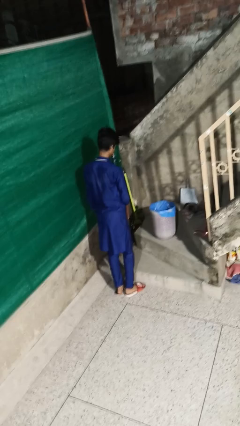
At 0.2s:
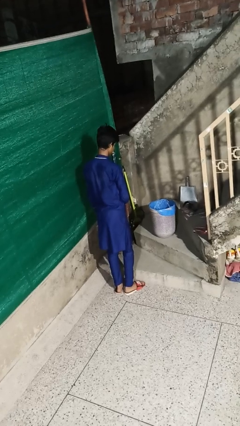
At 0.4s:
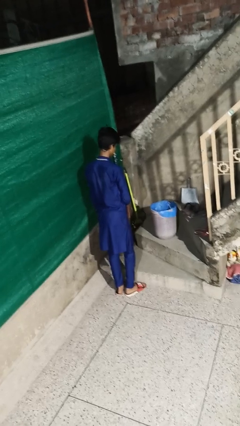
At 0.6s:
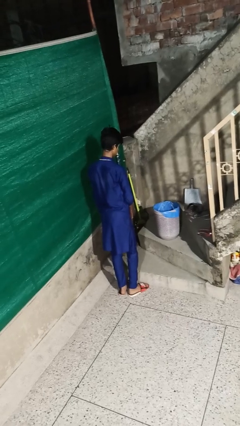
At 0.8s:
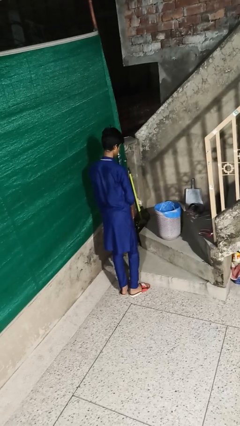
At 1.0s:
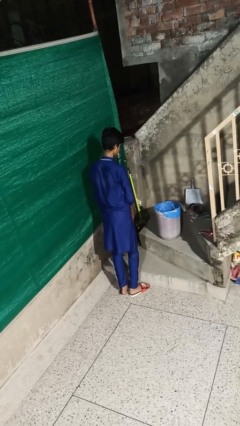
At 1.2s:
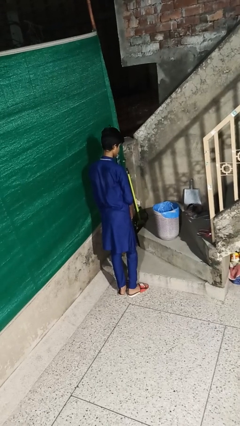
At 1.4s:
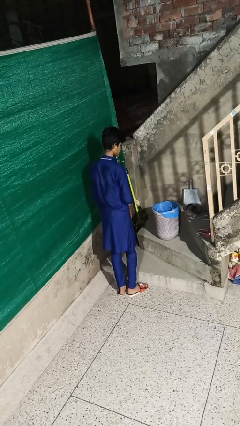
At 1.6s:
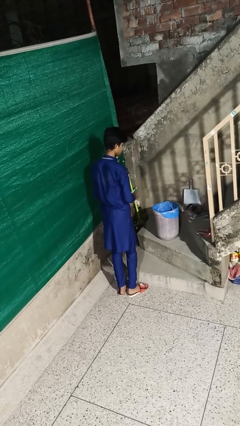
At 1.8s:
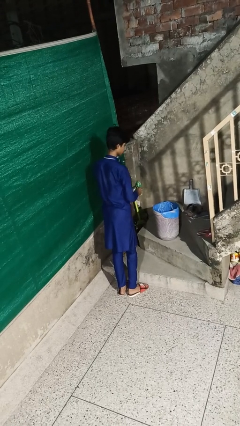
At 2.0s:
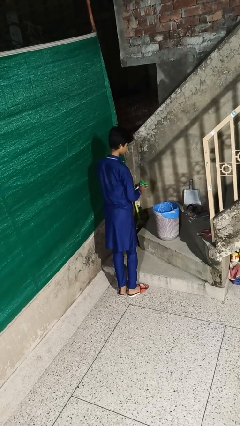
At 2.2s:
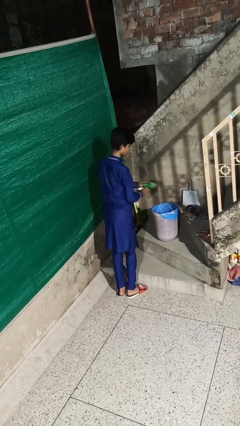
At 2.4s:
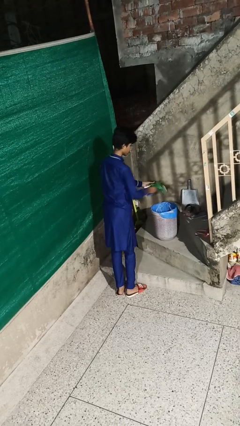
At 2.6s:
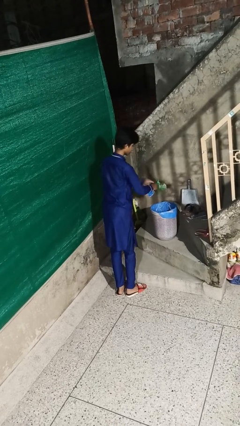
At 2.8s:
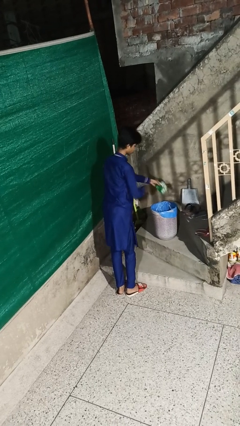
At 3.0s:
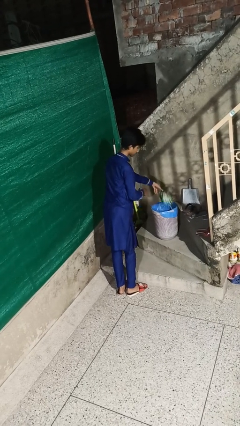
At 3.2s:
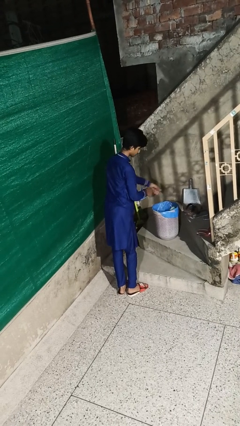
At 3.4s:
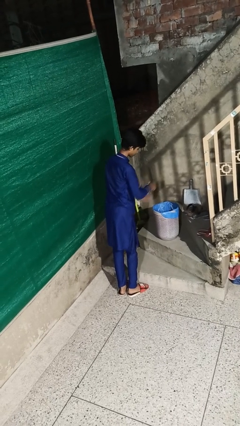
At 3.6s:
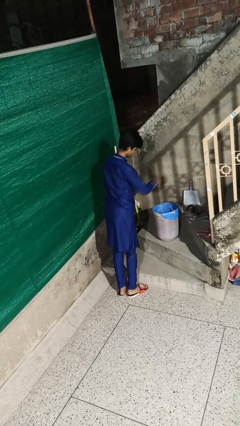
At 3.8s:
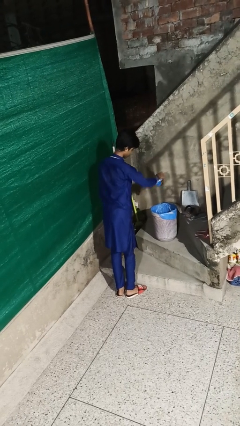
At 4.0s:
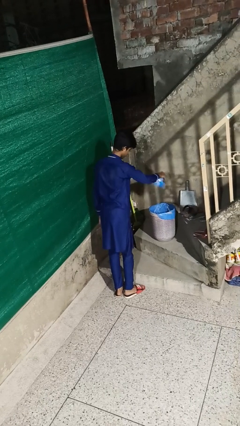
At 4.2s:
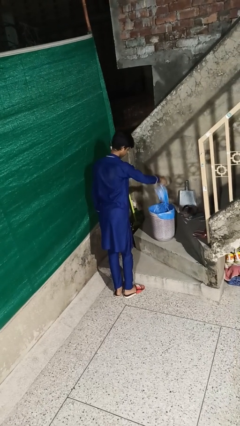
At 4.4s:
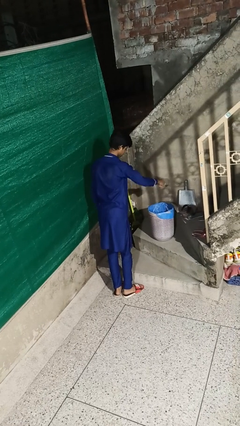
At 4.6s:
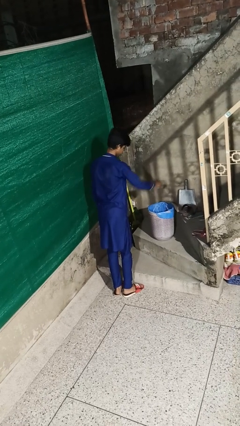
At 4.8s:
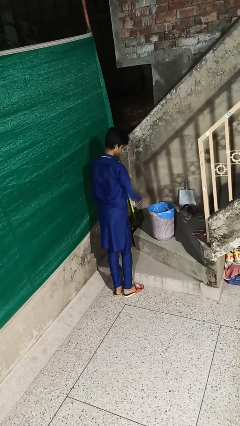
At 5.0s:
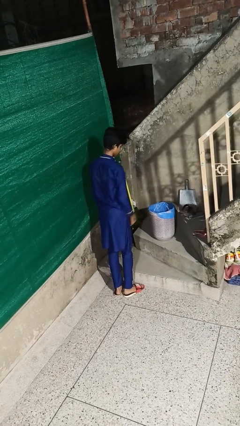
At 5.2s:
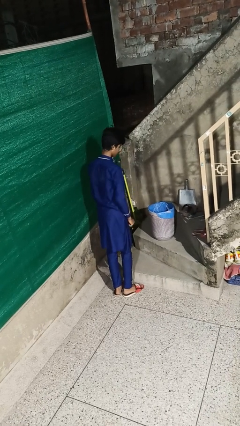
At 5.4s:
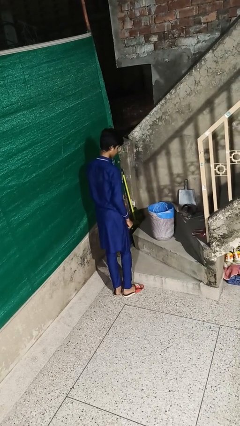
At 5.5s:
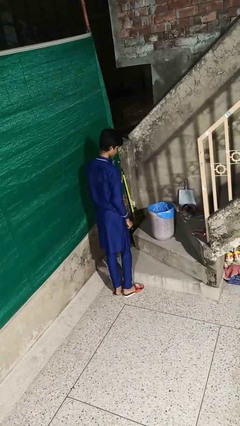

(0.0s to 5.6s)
person discards trash

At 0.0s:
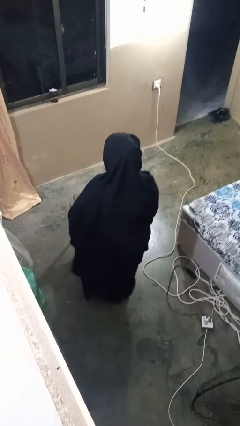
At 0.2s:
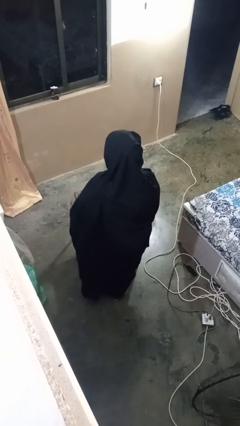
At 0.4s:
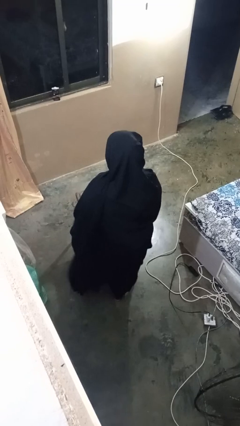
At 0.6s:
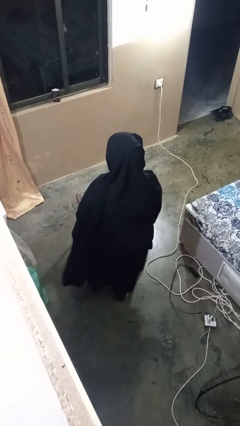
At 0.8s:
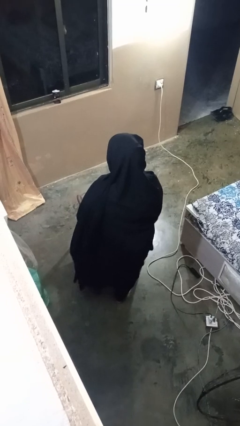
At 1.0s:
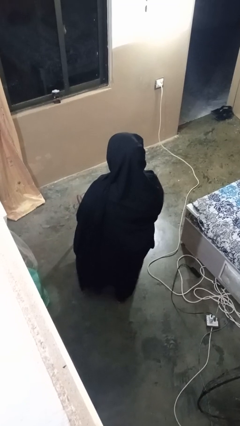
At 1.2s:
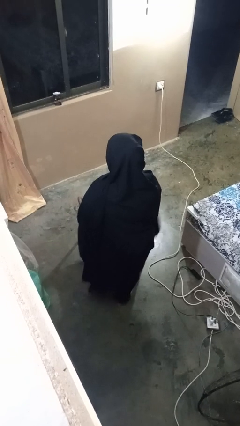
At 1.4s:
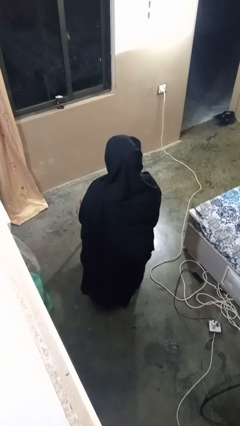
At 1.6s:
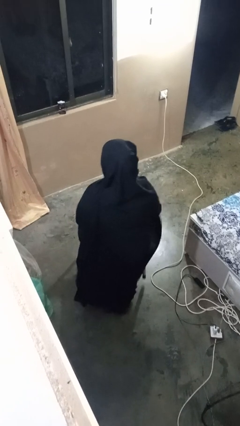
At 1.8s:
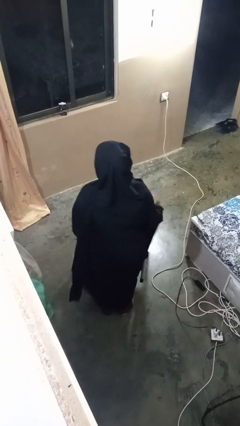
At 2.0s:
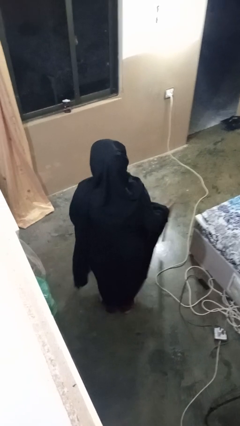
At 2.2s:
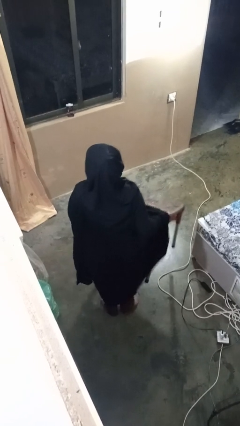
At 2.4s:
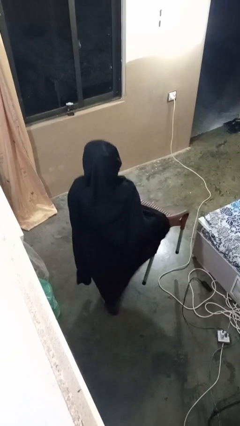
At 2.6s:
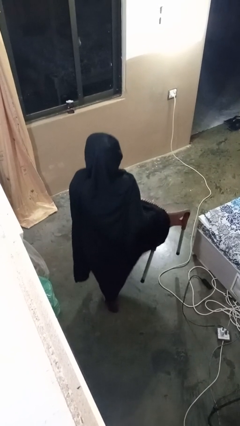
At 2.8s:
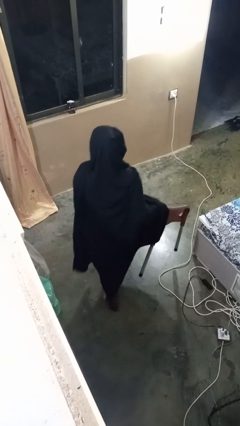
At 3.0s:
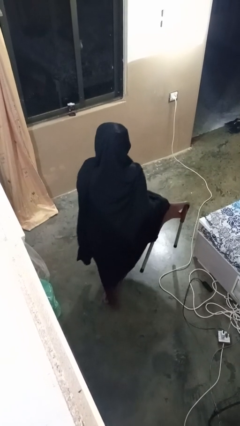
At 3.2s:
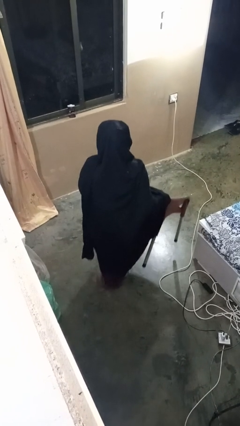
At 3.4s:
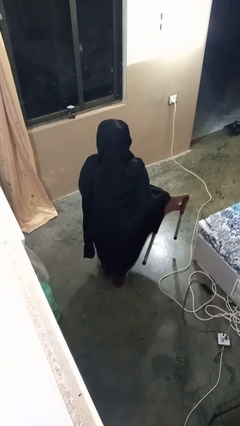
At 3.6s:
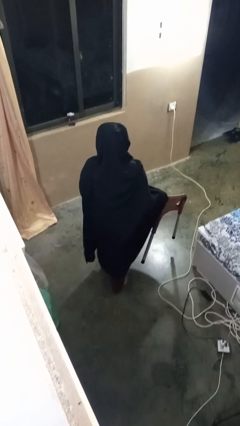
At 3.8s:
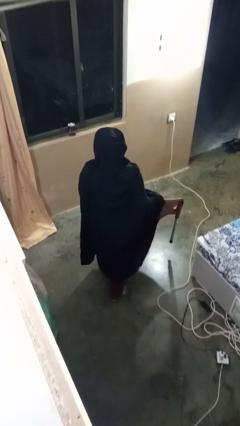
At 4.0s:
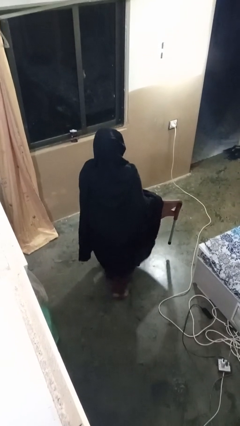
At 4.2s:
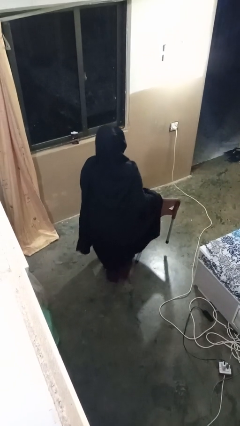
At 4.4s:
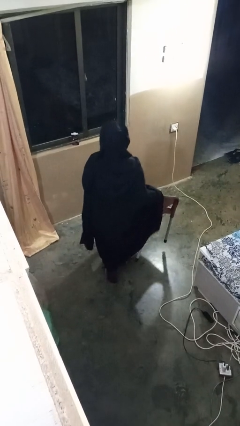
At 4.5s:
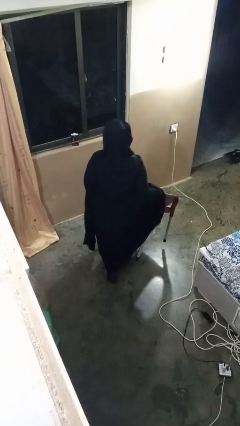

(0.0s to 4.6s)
person carries furniture

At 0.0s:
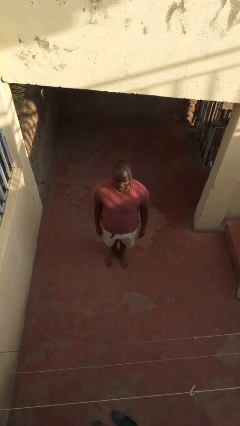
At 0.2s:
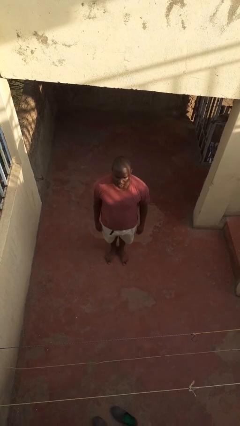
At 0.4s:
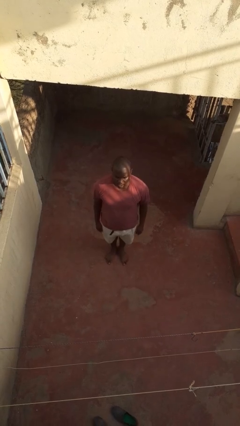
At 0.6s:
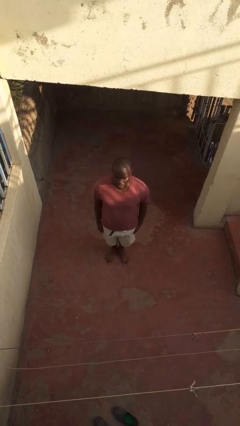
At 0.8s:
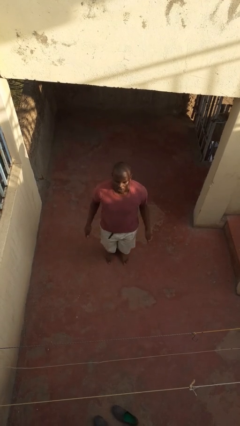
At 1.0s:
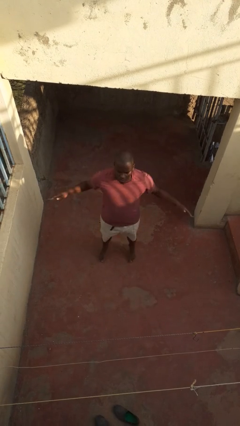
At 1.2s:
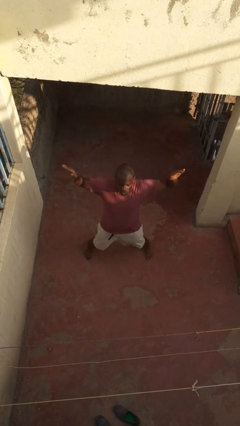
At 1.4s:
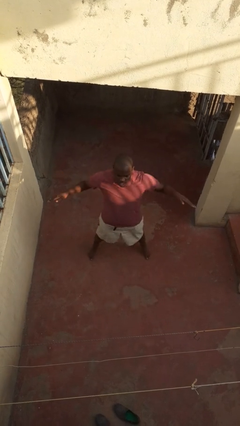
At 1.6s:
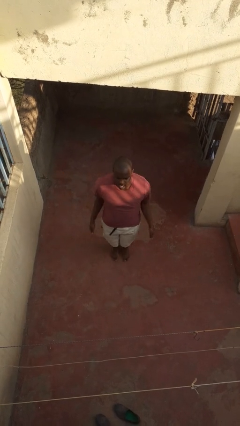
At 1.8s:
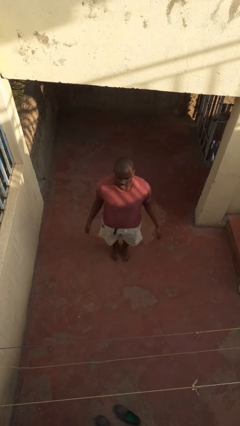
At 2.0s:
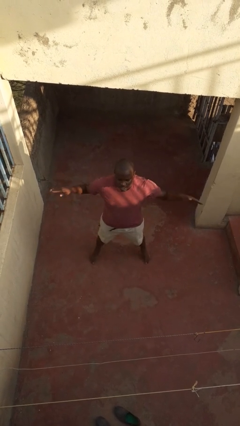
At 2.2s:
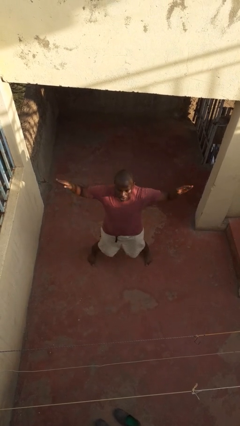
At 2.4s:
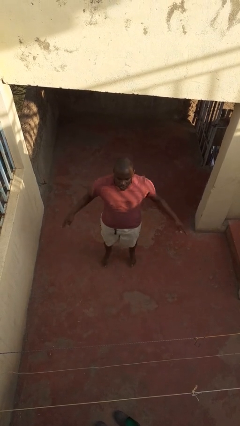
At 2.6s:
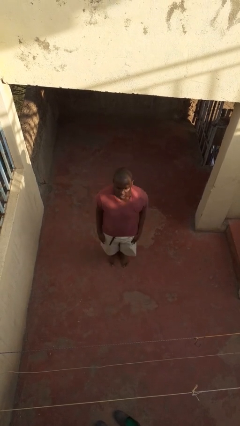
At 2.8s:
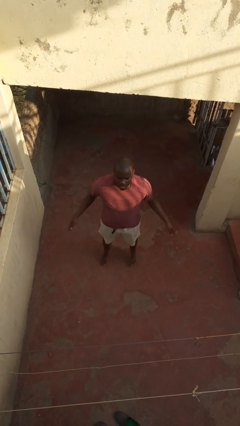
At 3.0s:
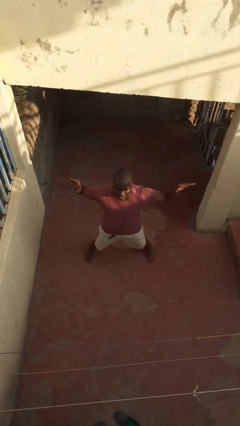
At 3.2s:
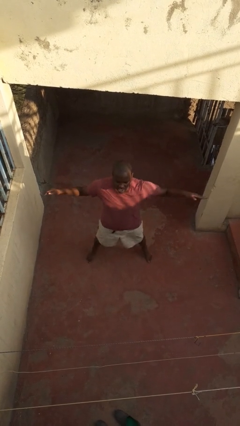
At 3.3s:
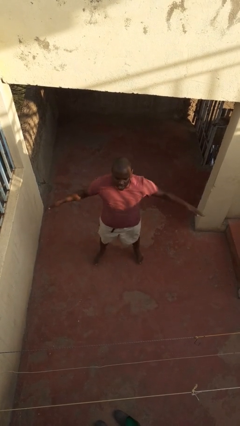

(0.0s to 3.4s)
person exercises with jumping jacks

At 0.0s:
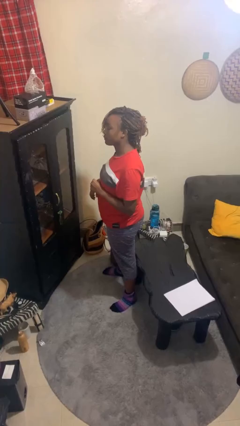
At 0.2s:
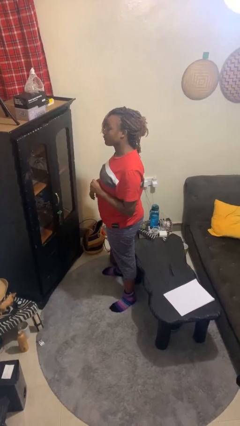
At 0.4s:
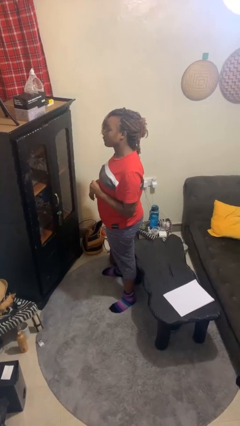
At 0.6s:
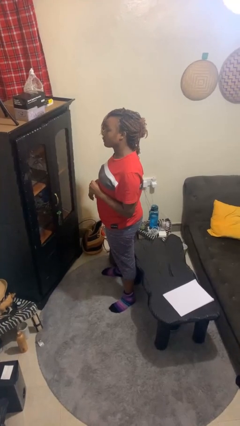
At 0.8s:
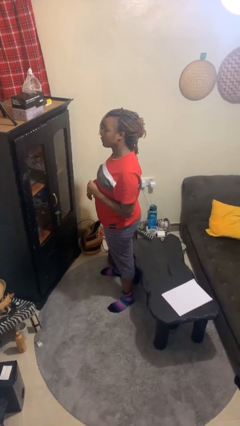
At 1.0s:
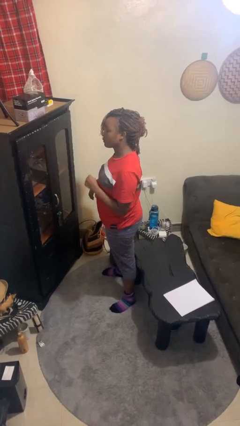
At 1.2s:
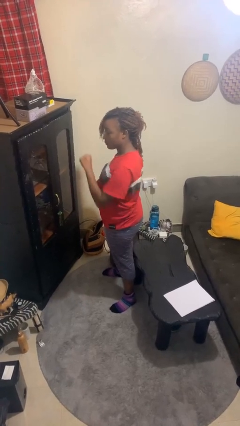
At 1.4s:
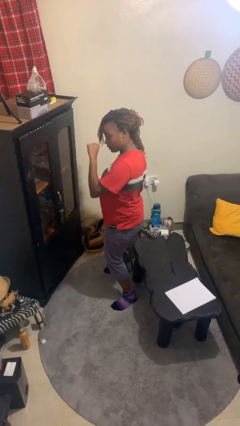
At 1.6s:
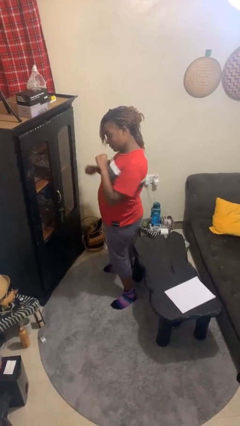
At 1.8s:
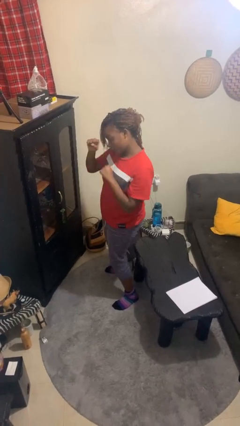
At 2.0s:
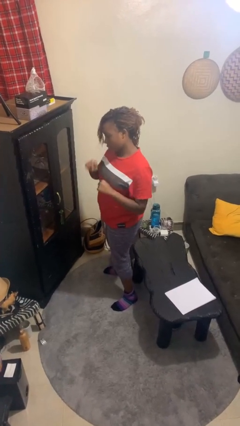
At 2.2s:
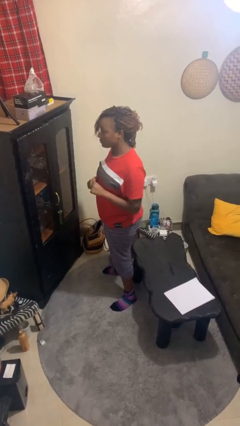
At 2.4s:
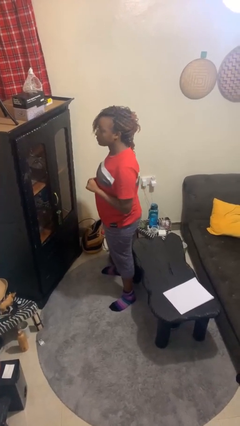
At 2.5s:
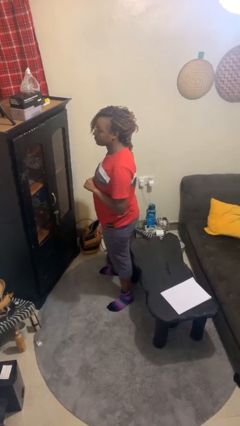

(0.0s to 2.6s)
person punches

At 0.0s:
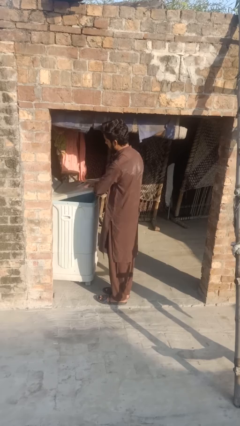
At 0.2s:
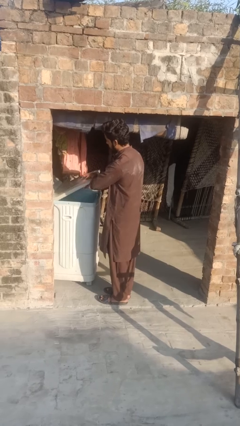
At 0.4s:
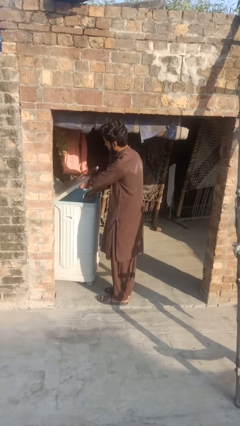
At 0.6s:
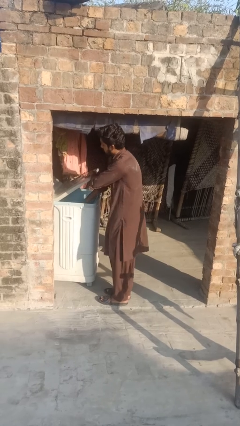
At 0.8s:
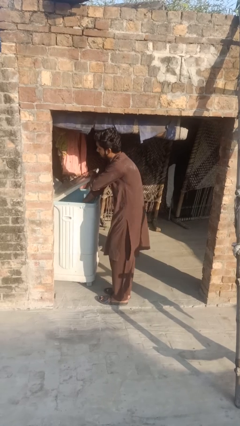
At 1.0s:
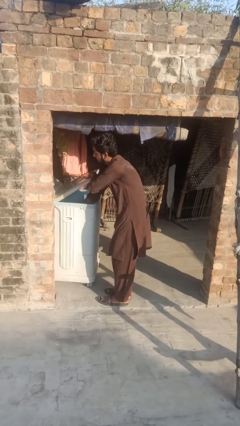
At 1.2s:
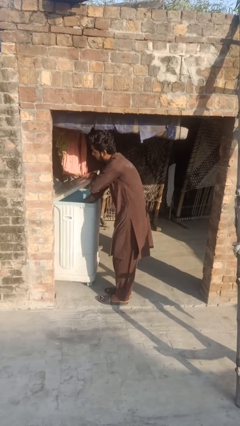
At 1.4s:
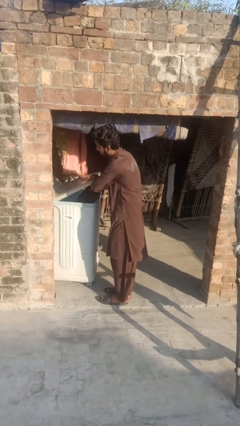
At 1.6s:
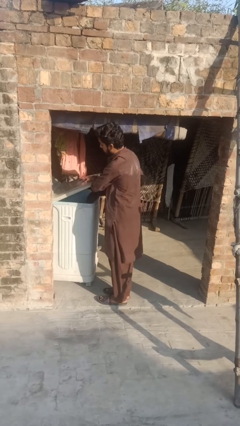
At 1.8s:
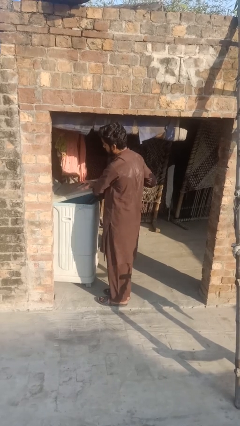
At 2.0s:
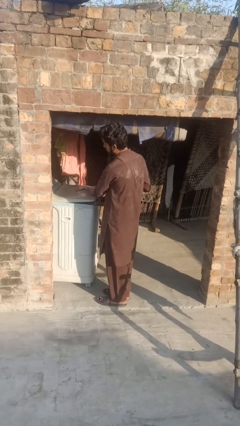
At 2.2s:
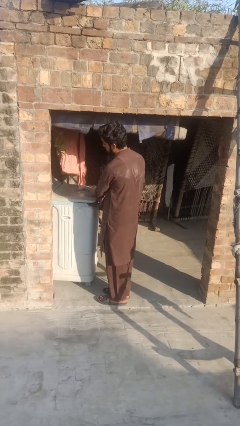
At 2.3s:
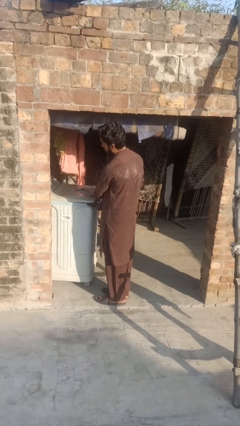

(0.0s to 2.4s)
person unloads dryer
